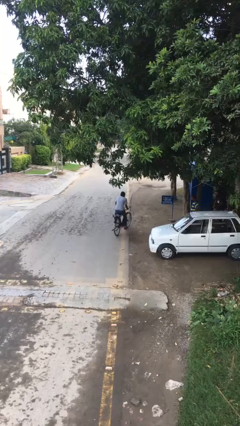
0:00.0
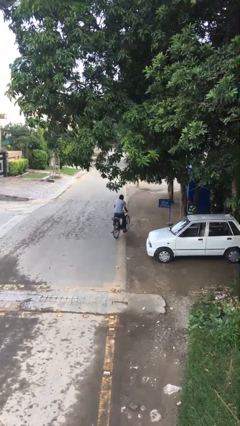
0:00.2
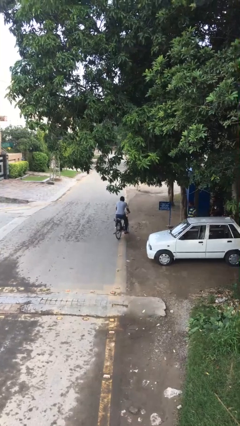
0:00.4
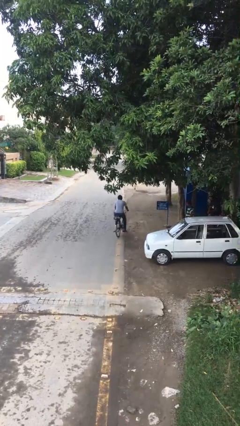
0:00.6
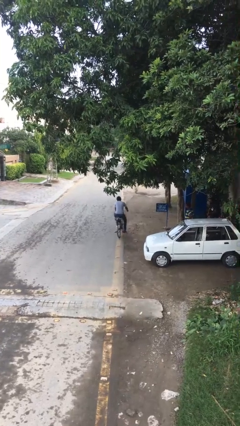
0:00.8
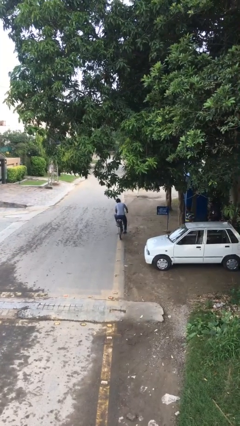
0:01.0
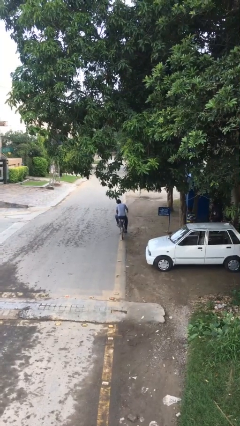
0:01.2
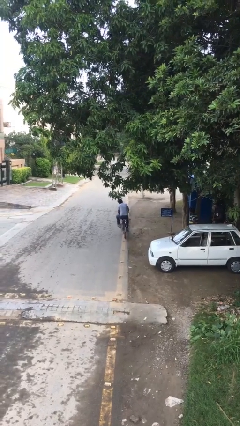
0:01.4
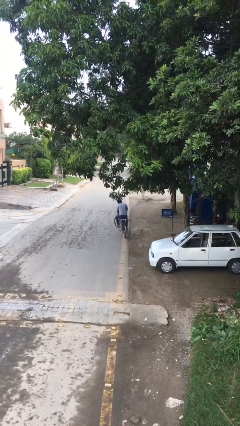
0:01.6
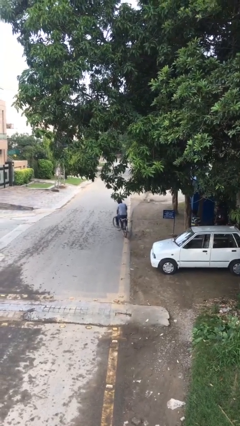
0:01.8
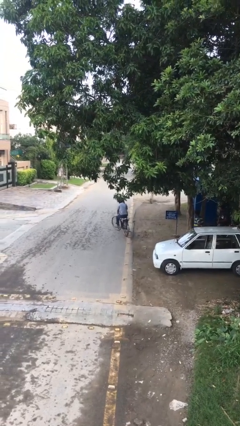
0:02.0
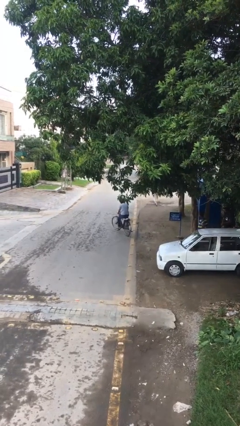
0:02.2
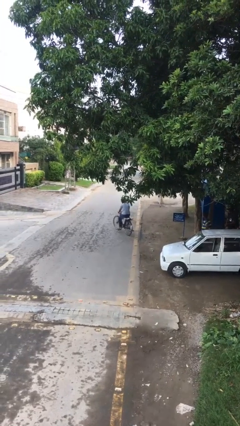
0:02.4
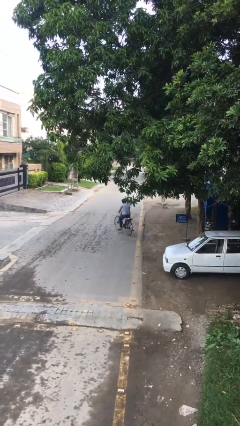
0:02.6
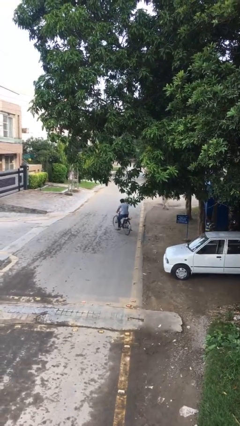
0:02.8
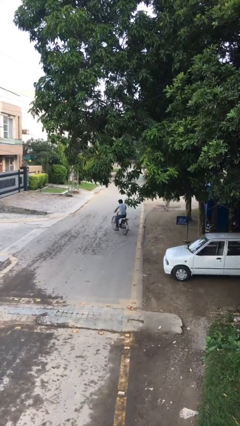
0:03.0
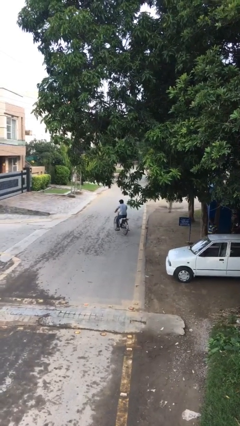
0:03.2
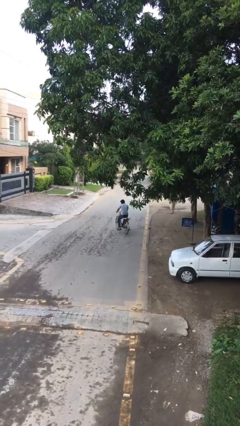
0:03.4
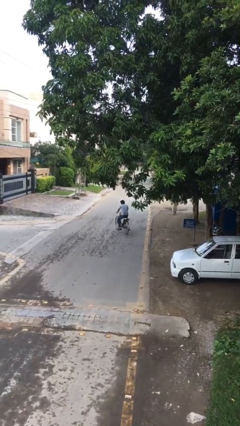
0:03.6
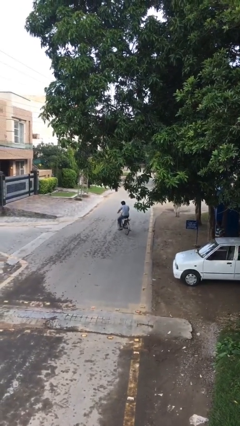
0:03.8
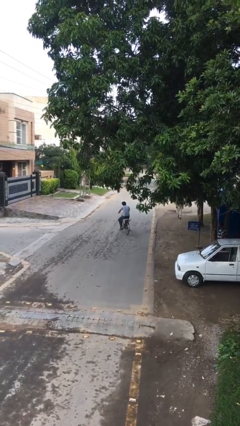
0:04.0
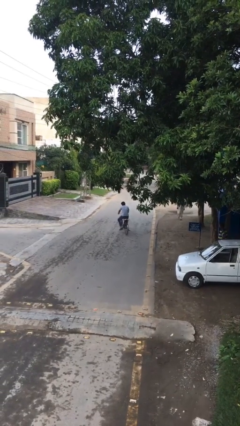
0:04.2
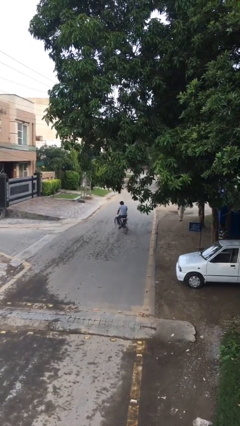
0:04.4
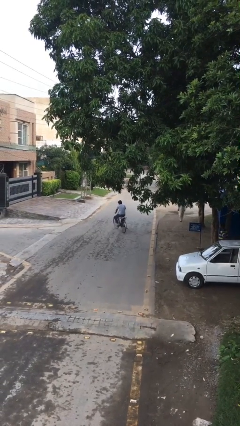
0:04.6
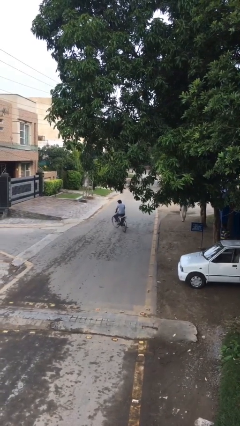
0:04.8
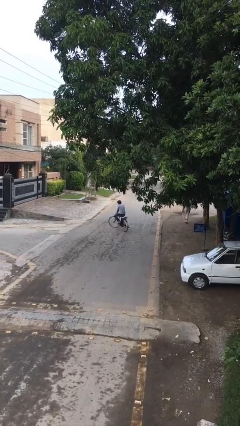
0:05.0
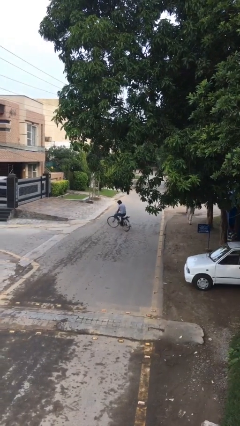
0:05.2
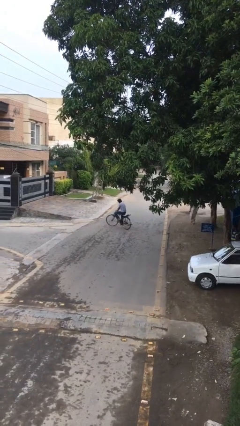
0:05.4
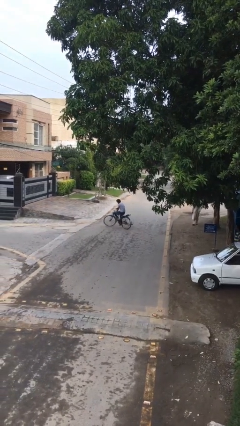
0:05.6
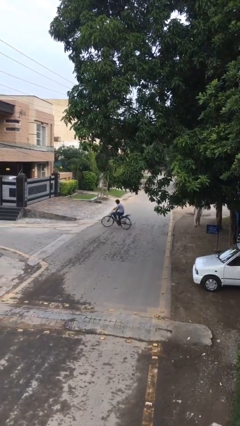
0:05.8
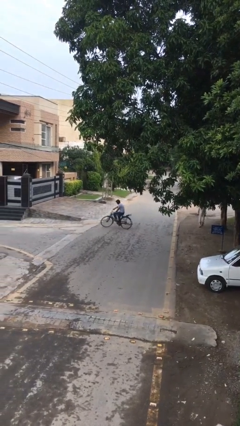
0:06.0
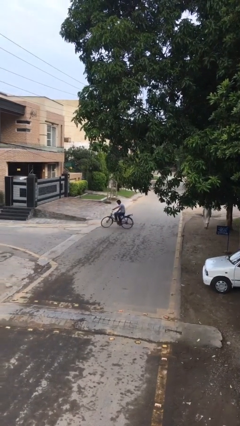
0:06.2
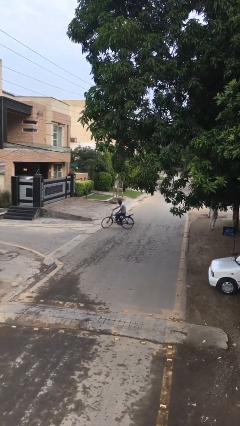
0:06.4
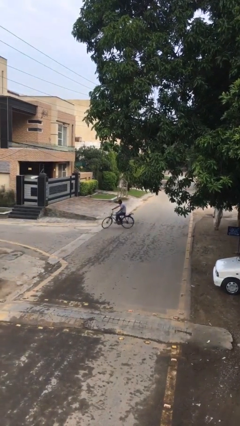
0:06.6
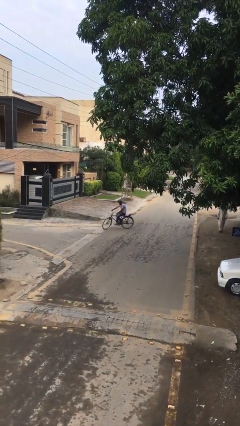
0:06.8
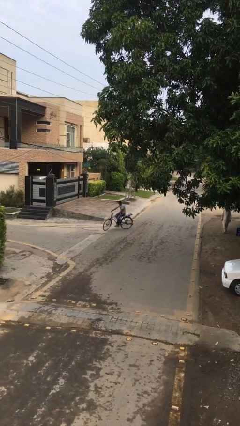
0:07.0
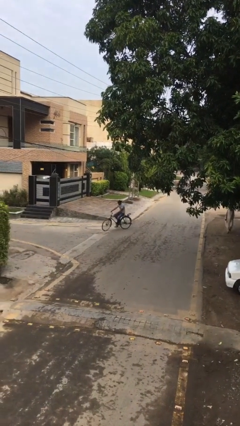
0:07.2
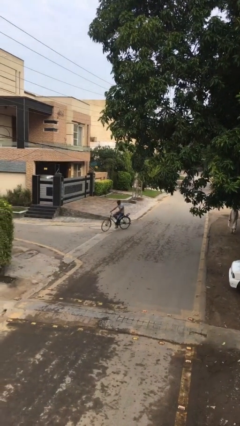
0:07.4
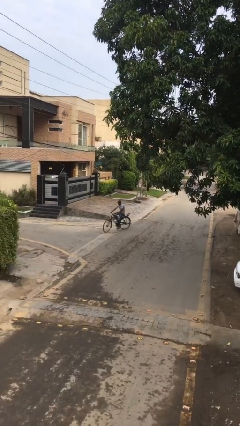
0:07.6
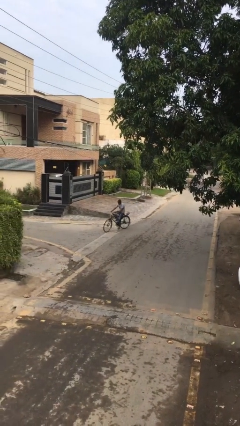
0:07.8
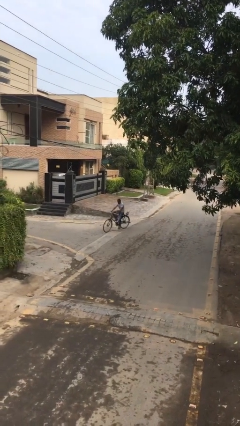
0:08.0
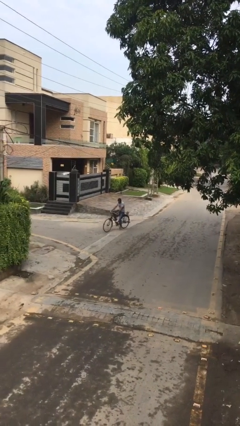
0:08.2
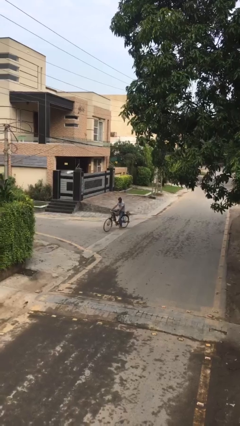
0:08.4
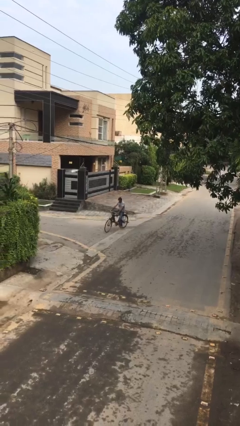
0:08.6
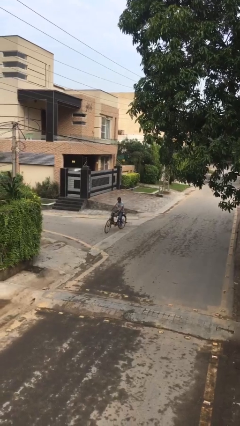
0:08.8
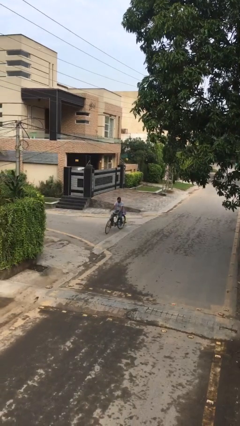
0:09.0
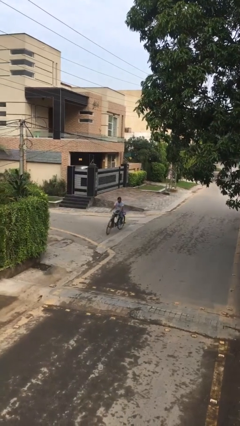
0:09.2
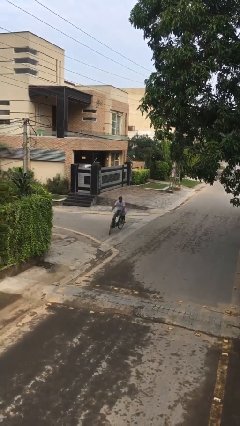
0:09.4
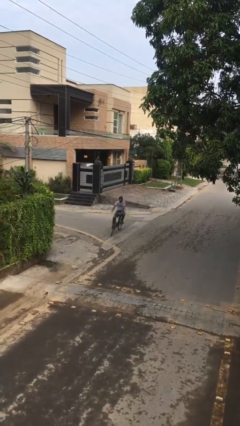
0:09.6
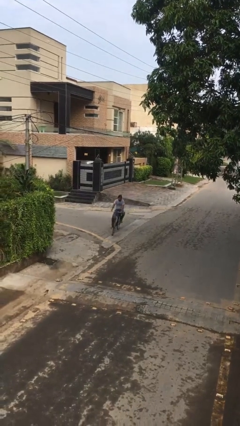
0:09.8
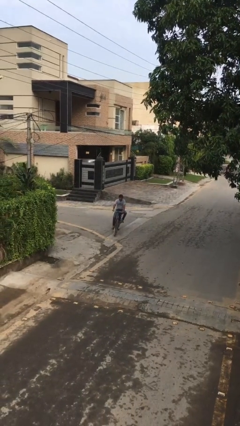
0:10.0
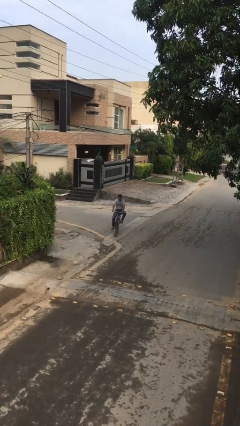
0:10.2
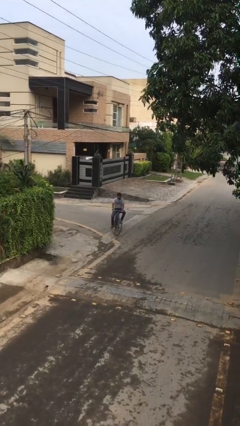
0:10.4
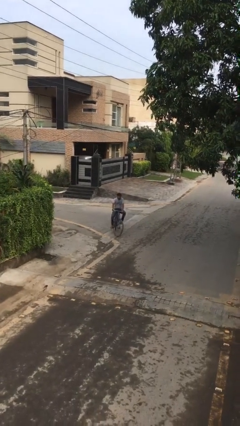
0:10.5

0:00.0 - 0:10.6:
person rides bicycle

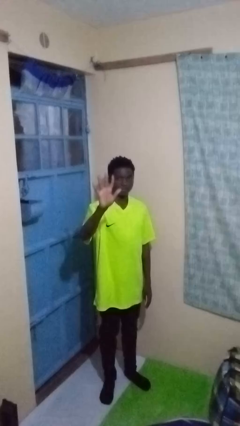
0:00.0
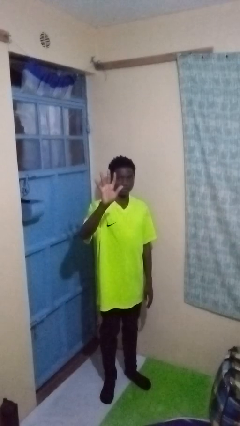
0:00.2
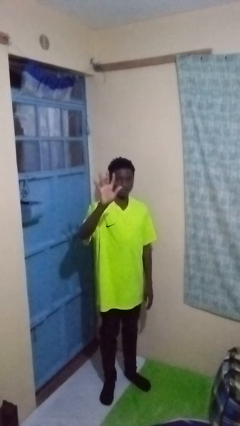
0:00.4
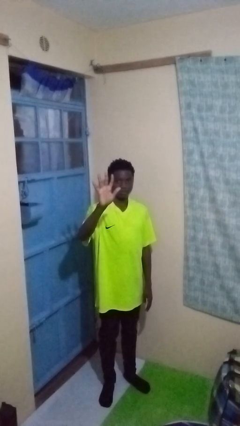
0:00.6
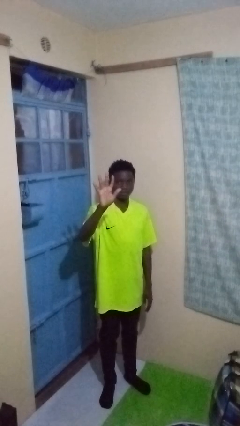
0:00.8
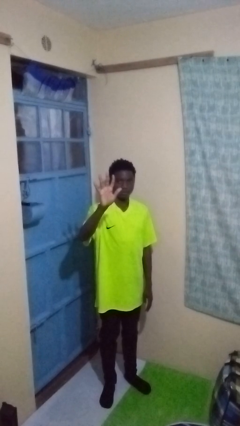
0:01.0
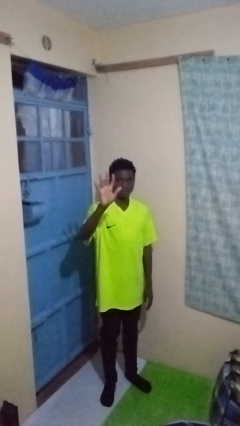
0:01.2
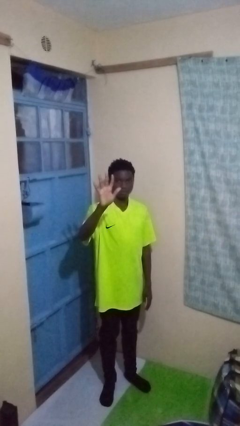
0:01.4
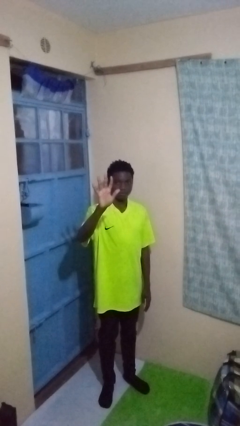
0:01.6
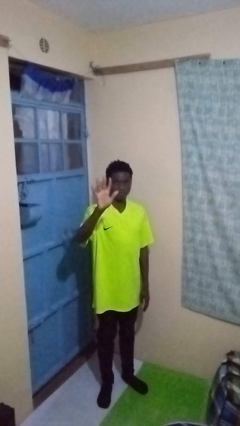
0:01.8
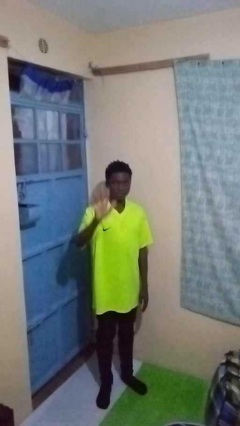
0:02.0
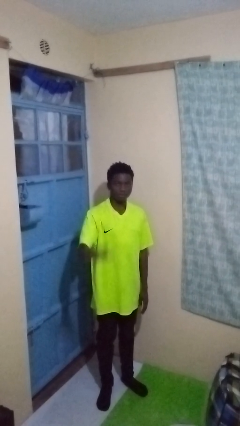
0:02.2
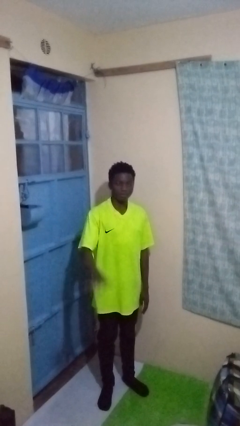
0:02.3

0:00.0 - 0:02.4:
person gestures number five

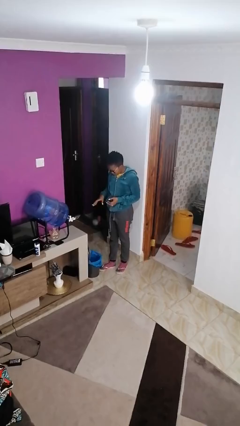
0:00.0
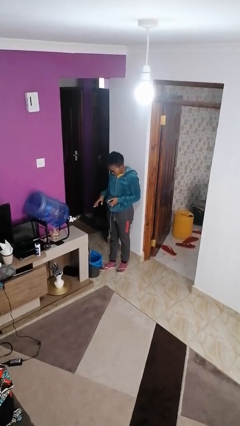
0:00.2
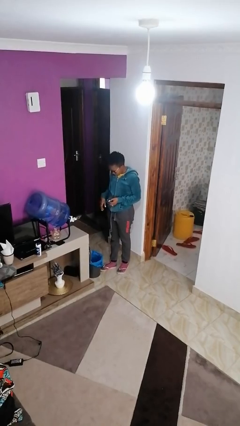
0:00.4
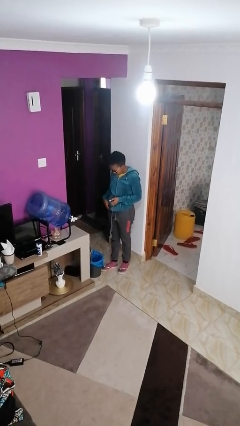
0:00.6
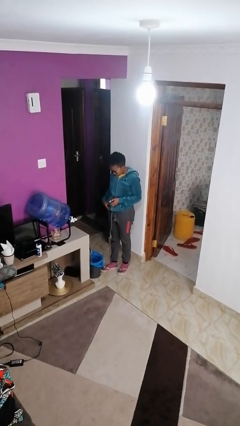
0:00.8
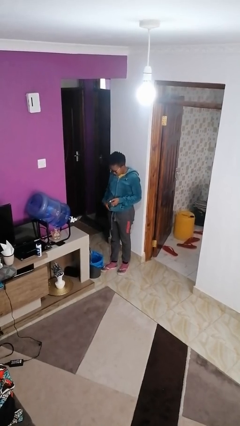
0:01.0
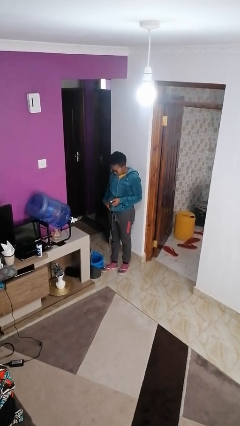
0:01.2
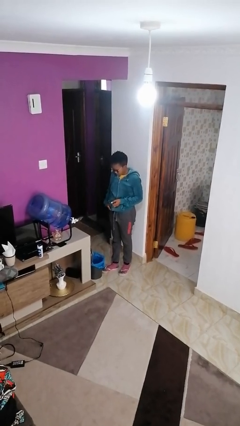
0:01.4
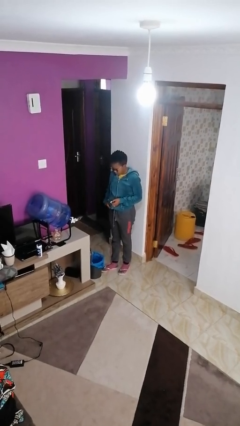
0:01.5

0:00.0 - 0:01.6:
person discards trash

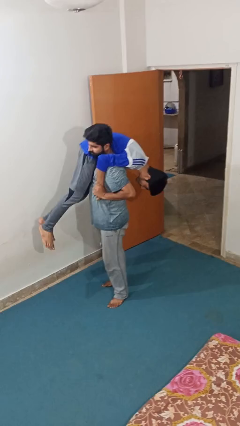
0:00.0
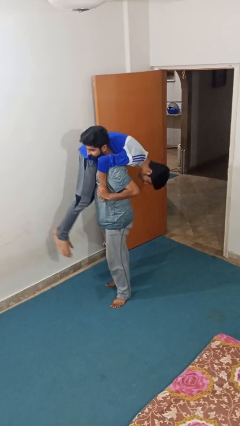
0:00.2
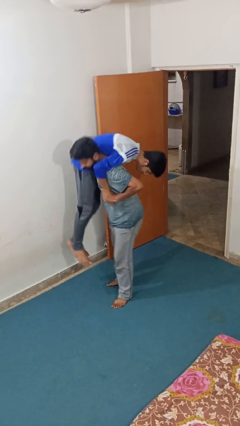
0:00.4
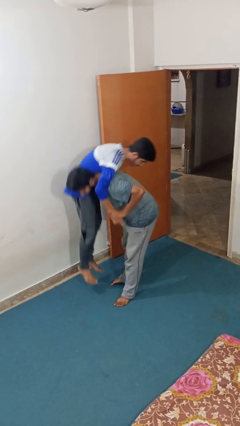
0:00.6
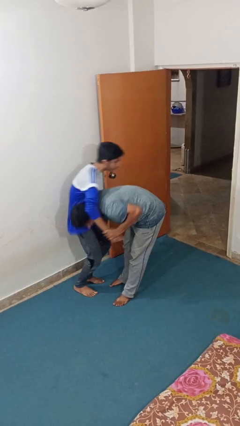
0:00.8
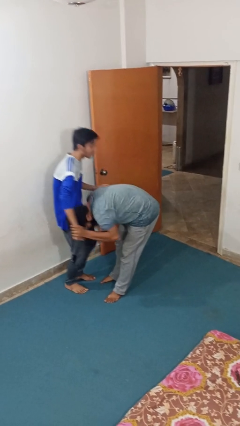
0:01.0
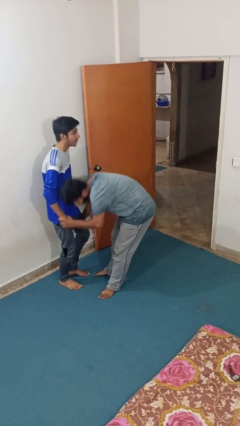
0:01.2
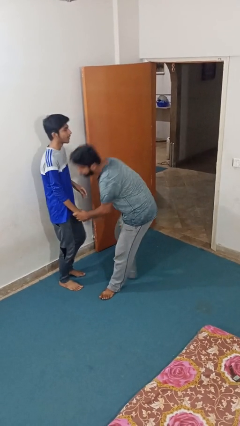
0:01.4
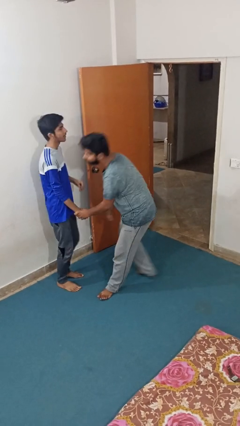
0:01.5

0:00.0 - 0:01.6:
person puts down person

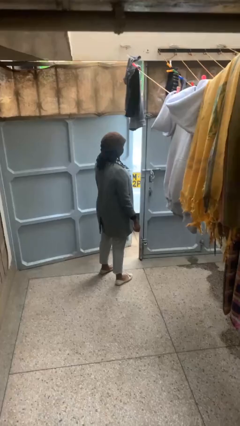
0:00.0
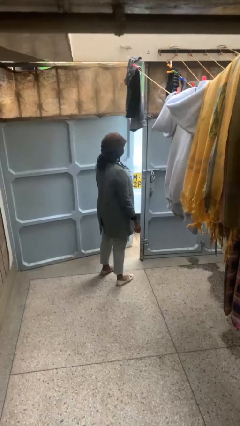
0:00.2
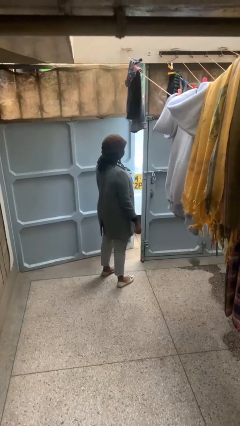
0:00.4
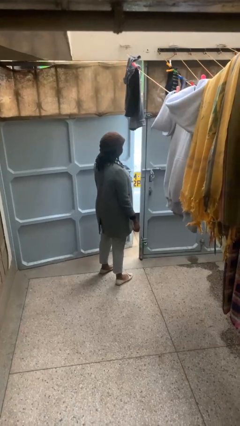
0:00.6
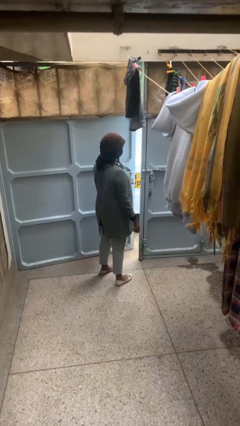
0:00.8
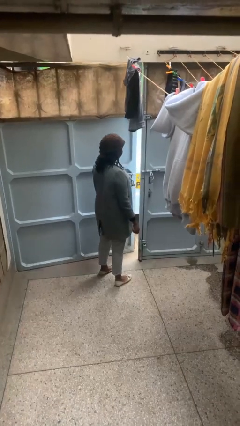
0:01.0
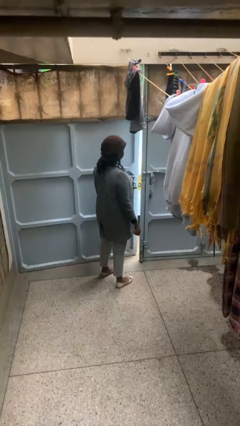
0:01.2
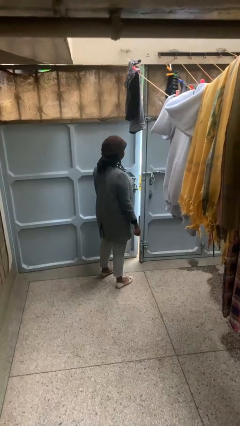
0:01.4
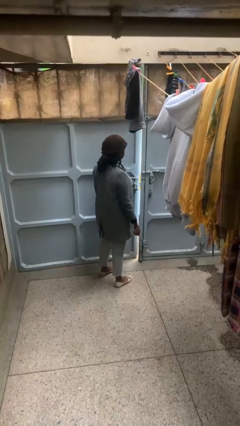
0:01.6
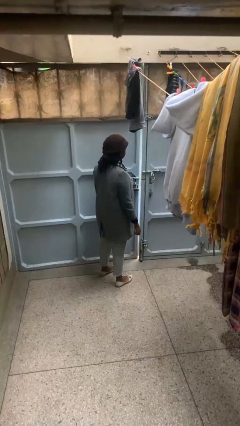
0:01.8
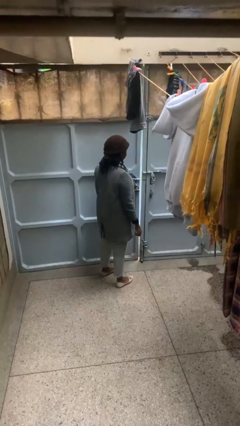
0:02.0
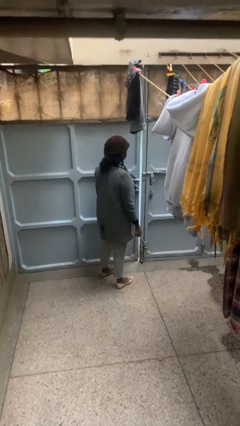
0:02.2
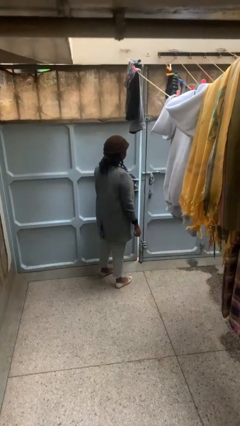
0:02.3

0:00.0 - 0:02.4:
person closes gate
